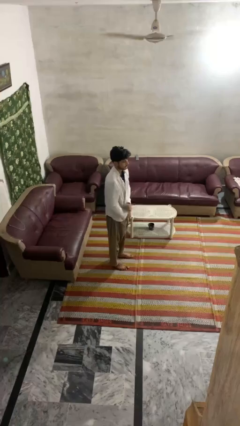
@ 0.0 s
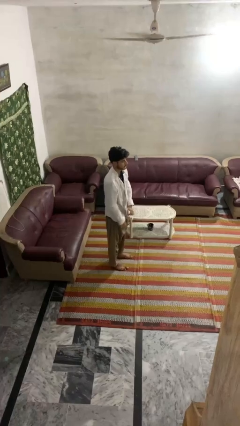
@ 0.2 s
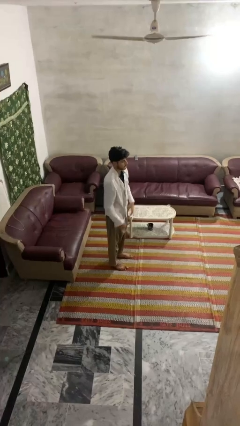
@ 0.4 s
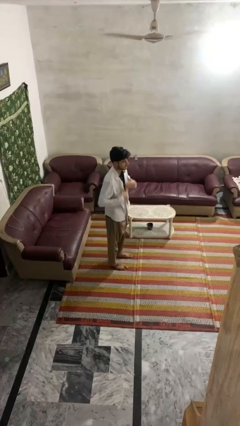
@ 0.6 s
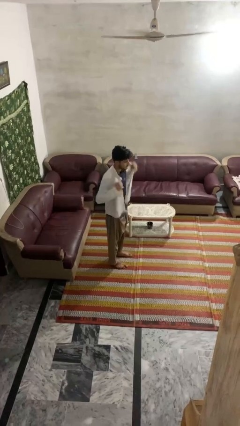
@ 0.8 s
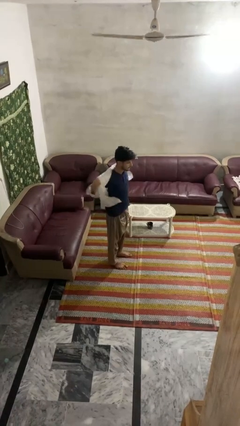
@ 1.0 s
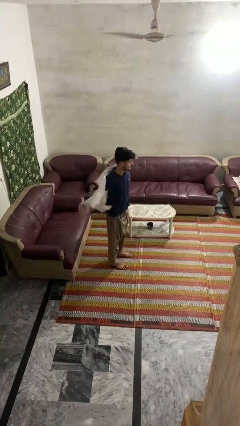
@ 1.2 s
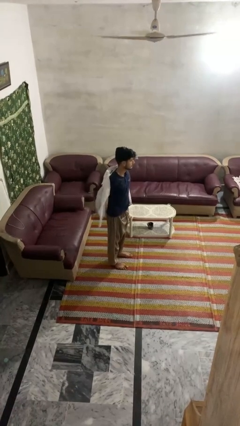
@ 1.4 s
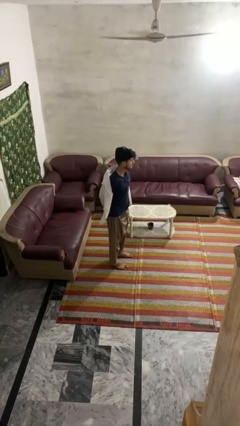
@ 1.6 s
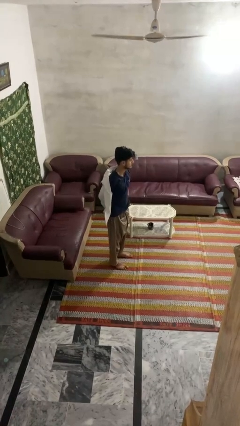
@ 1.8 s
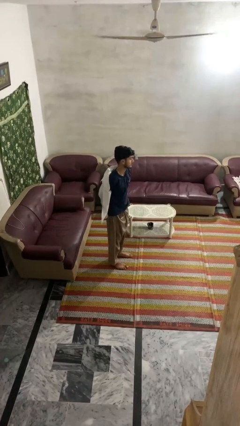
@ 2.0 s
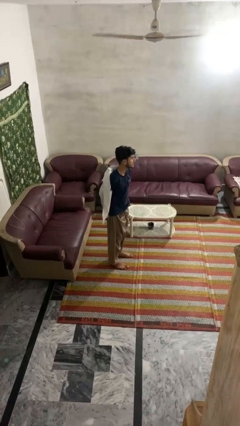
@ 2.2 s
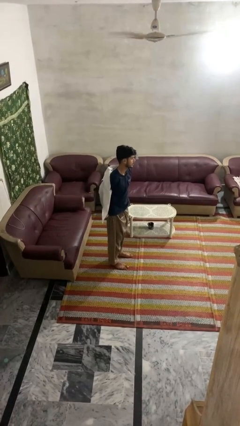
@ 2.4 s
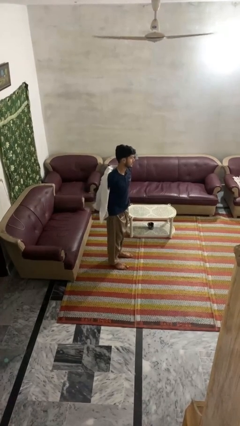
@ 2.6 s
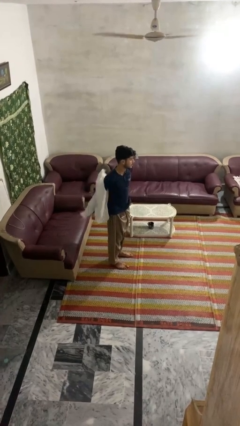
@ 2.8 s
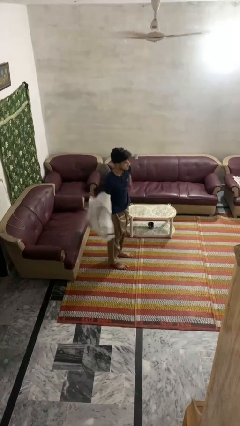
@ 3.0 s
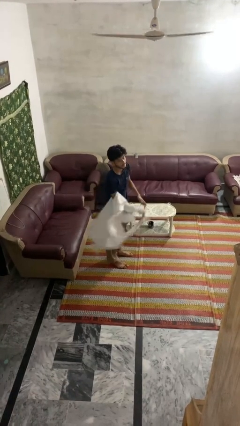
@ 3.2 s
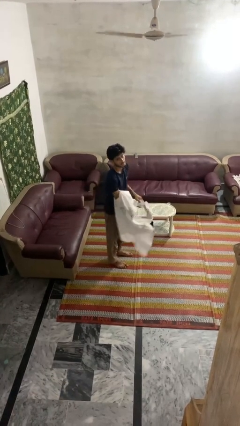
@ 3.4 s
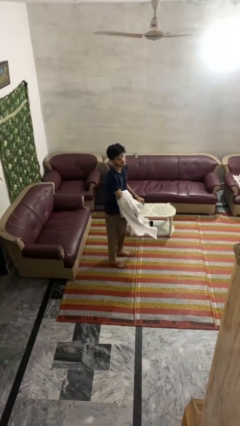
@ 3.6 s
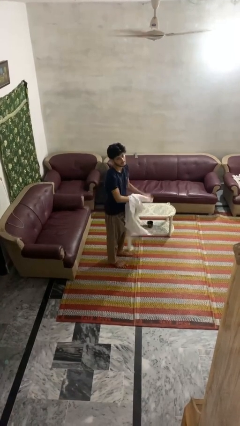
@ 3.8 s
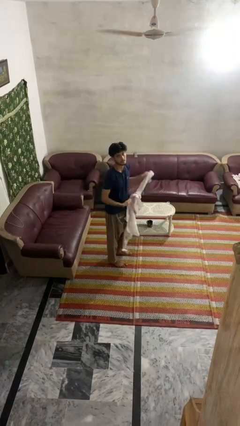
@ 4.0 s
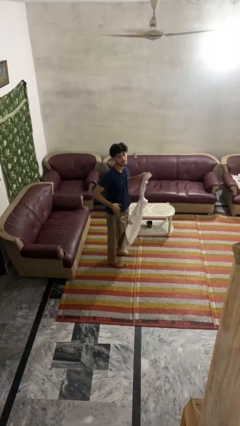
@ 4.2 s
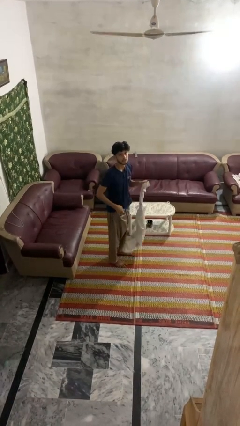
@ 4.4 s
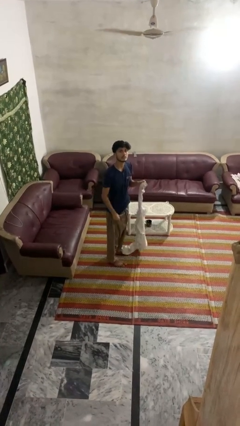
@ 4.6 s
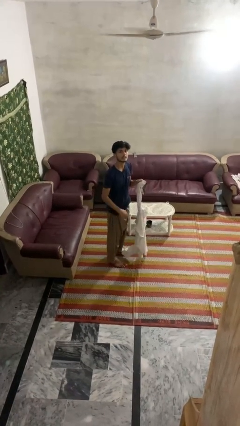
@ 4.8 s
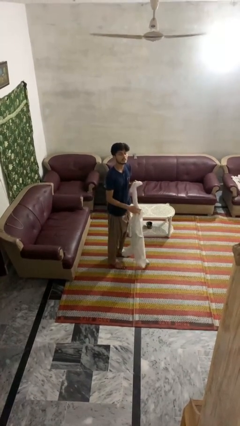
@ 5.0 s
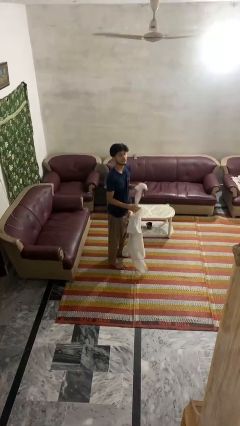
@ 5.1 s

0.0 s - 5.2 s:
person takes off shirt

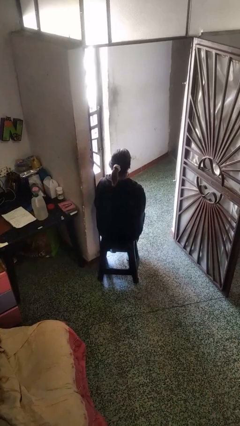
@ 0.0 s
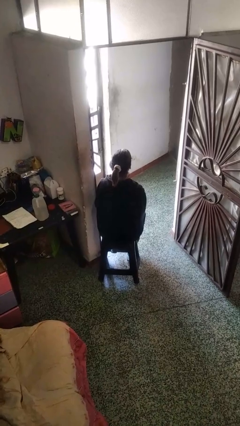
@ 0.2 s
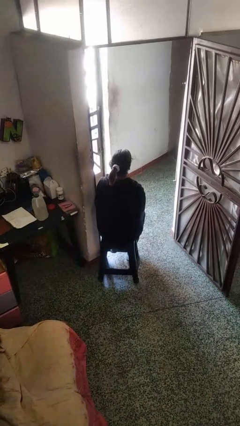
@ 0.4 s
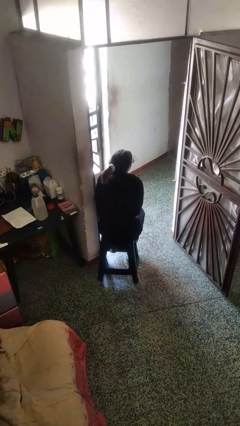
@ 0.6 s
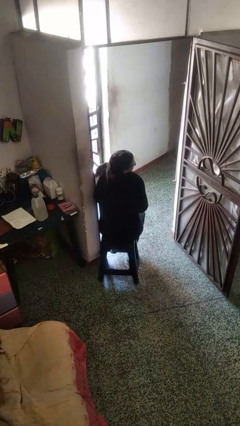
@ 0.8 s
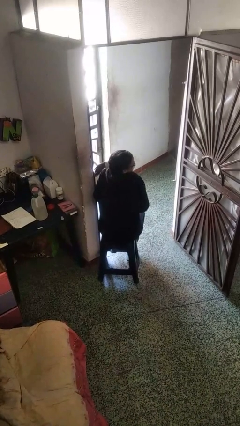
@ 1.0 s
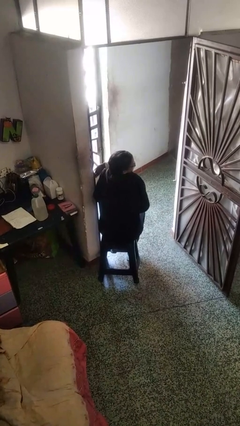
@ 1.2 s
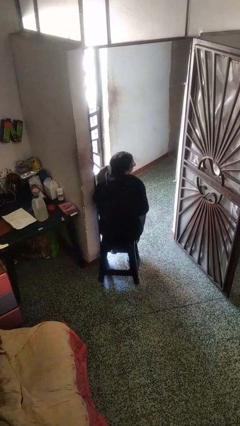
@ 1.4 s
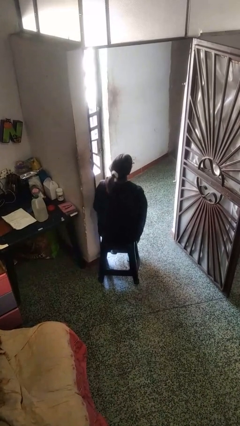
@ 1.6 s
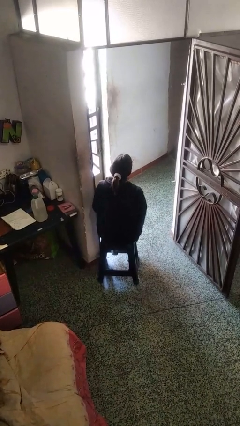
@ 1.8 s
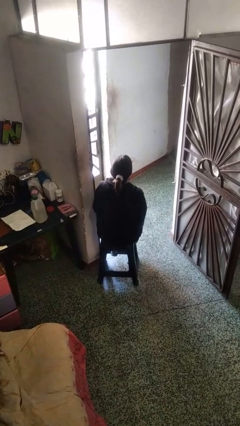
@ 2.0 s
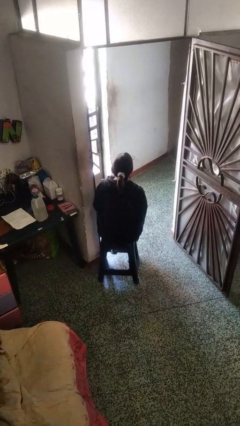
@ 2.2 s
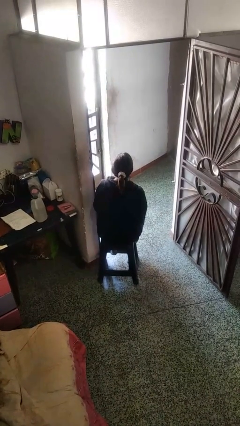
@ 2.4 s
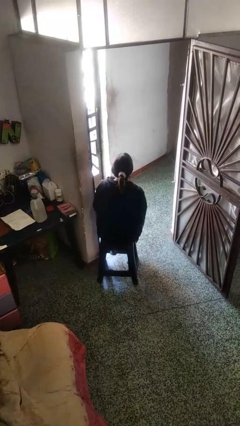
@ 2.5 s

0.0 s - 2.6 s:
person shrugs

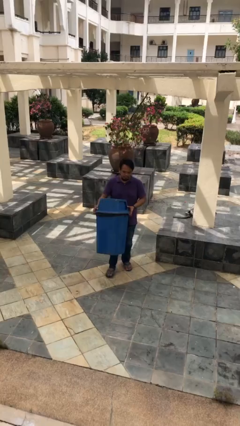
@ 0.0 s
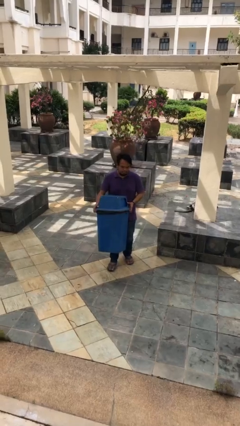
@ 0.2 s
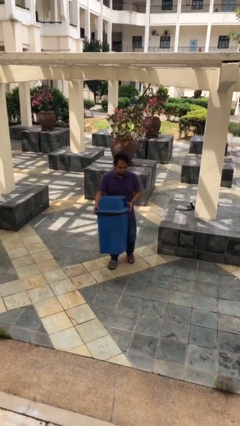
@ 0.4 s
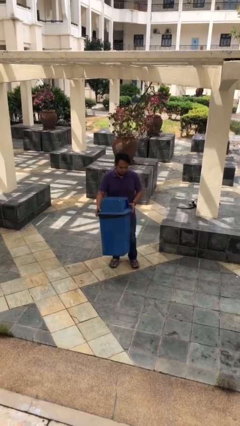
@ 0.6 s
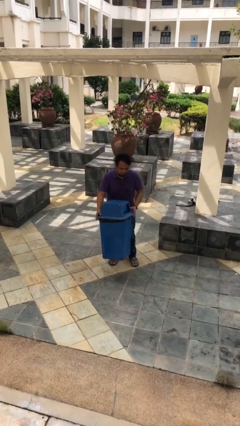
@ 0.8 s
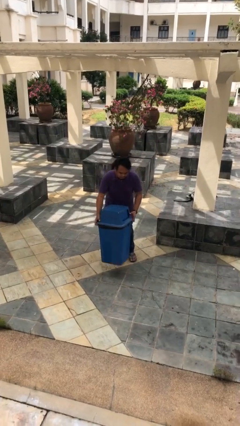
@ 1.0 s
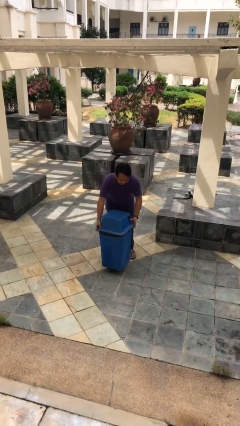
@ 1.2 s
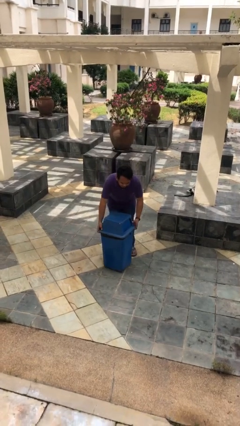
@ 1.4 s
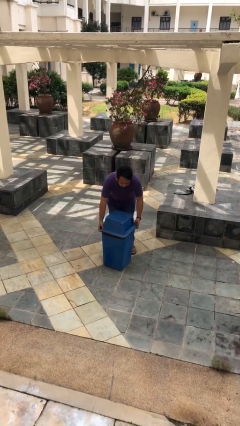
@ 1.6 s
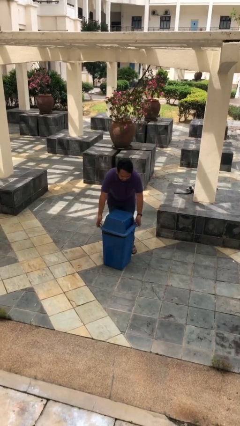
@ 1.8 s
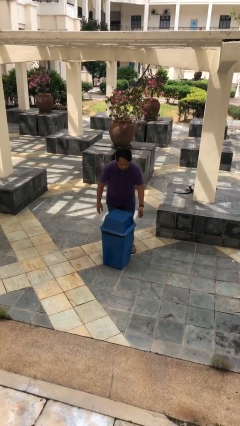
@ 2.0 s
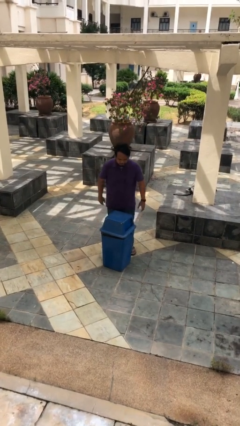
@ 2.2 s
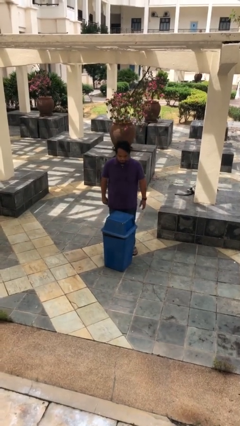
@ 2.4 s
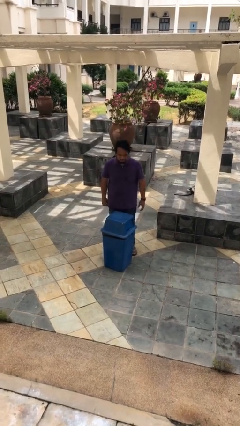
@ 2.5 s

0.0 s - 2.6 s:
person puts down object on floor

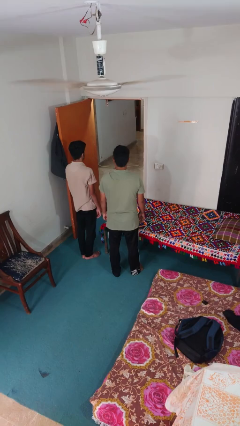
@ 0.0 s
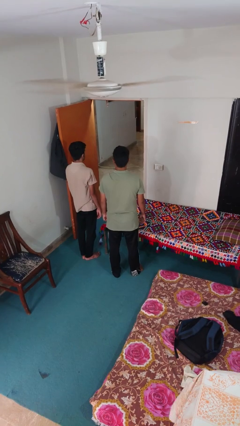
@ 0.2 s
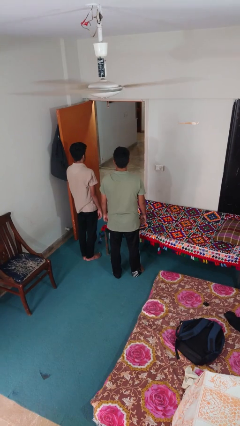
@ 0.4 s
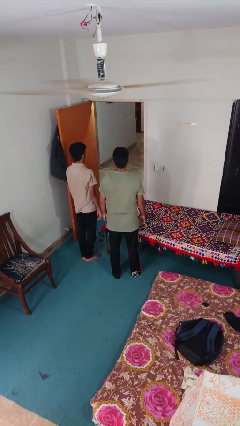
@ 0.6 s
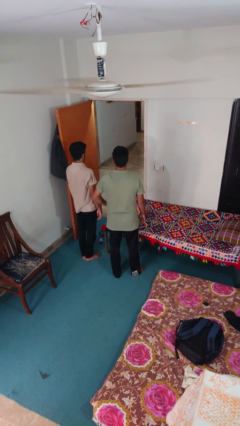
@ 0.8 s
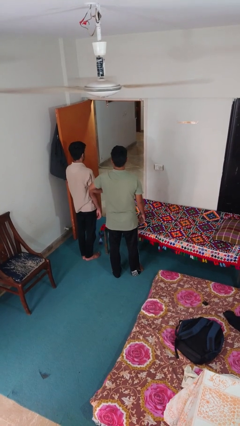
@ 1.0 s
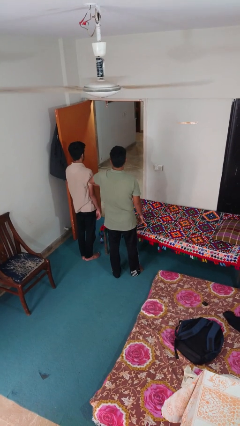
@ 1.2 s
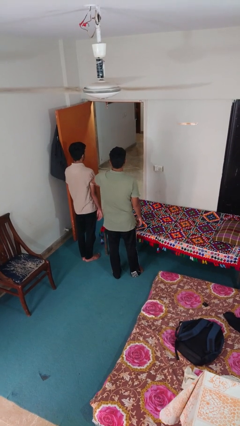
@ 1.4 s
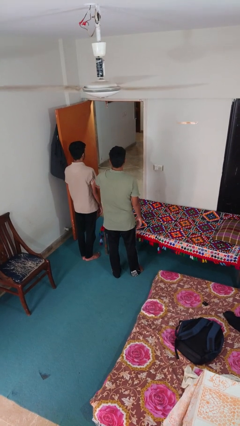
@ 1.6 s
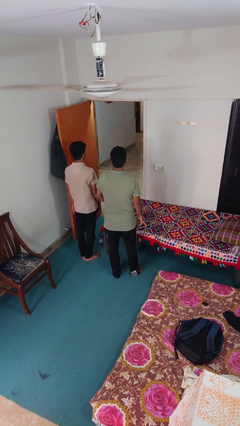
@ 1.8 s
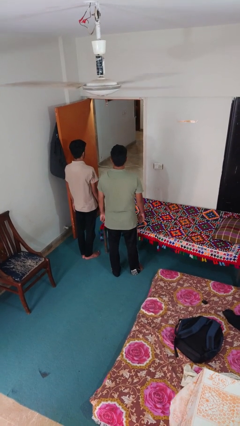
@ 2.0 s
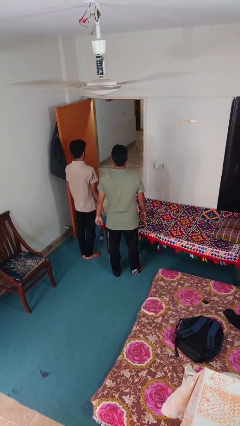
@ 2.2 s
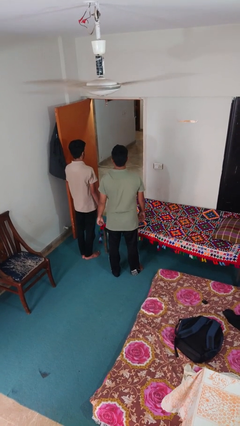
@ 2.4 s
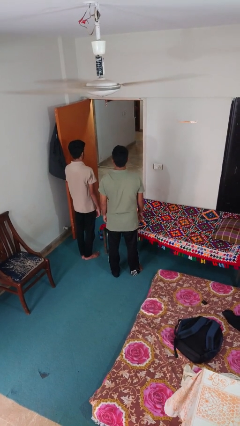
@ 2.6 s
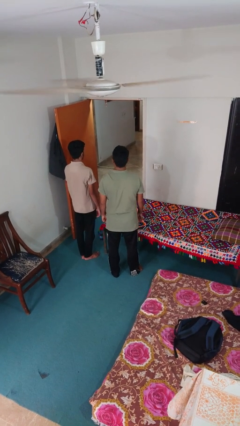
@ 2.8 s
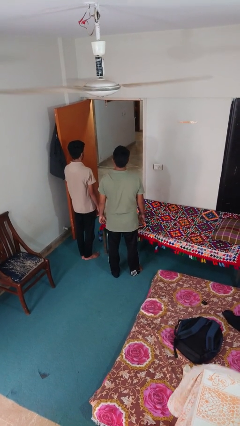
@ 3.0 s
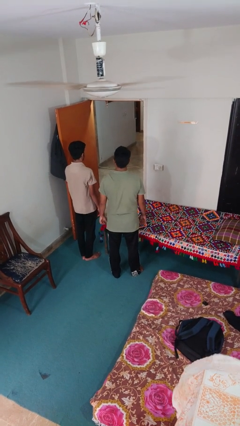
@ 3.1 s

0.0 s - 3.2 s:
person nudges person with elbow

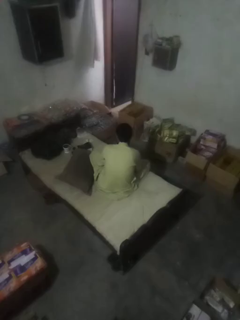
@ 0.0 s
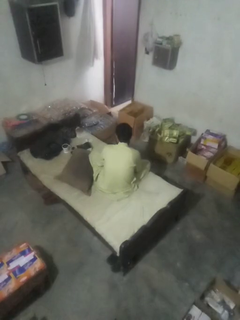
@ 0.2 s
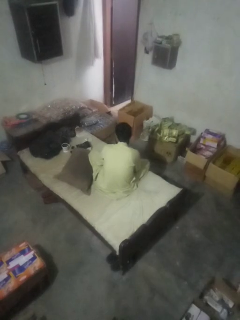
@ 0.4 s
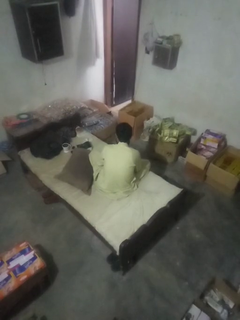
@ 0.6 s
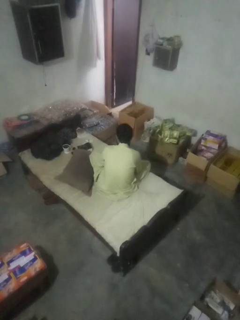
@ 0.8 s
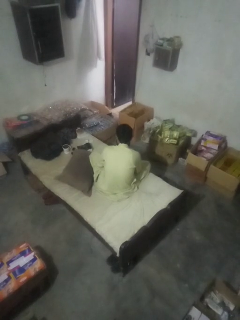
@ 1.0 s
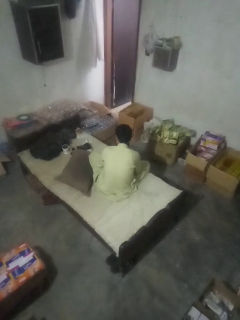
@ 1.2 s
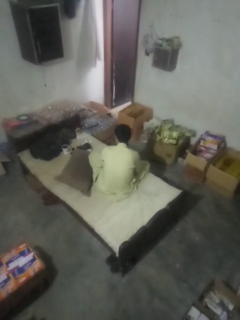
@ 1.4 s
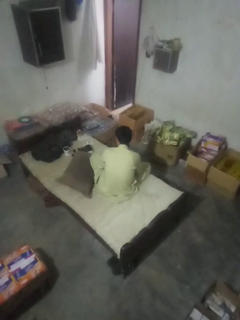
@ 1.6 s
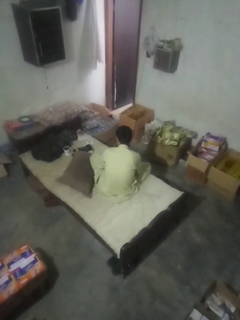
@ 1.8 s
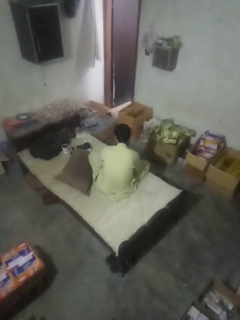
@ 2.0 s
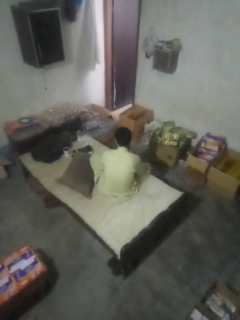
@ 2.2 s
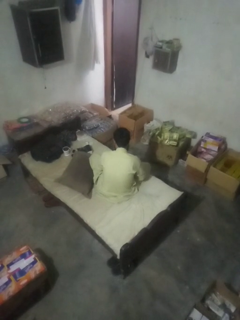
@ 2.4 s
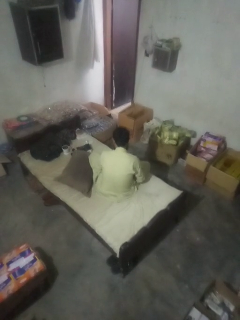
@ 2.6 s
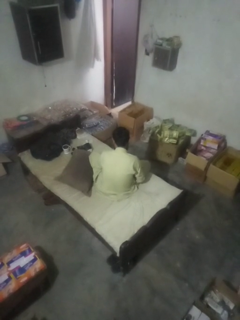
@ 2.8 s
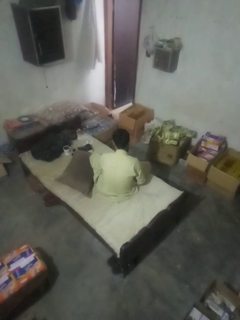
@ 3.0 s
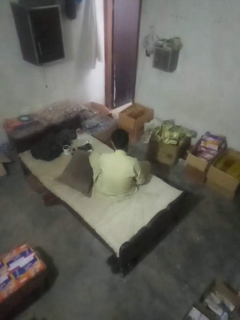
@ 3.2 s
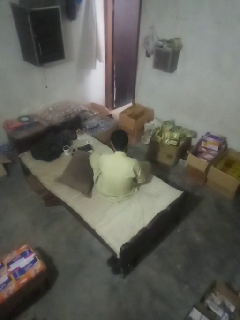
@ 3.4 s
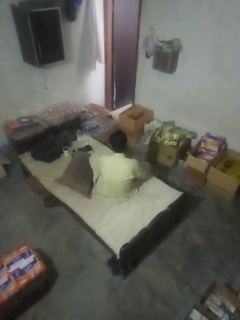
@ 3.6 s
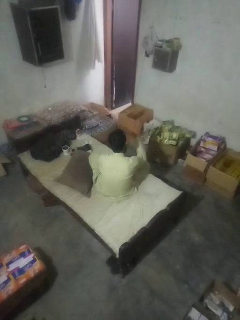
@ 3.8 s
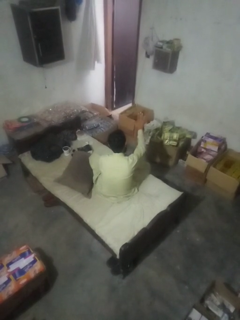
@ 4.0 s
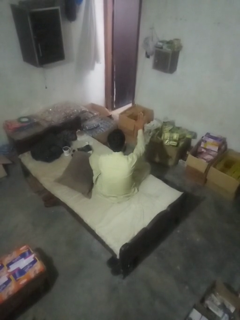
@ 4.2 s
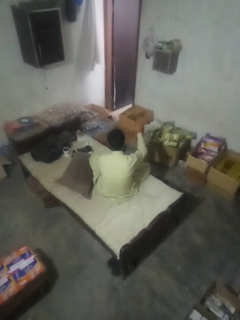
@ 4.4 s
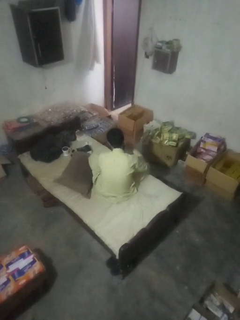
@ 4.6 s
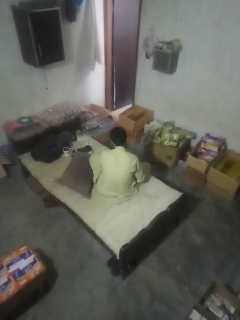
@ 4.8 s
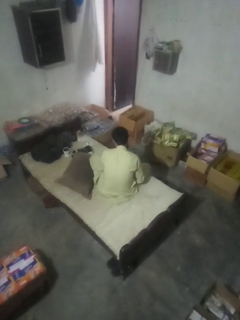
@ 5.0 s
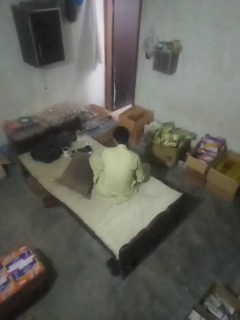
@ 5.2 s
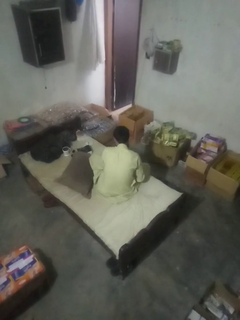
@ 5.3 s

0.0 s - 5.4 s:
person gestures stop
